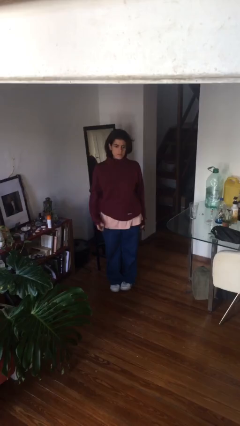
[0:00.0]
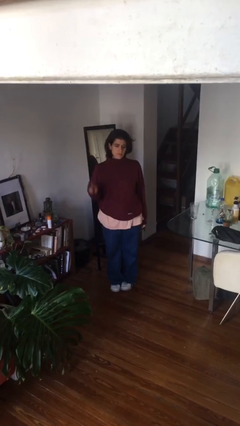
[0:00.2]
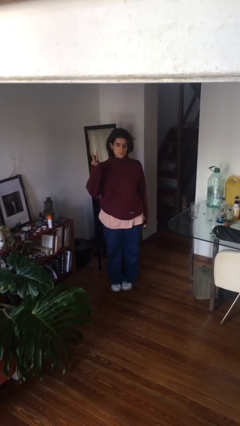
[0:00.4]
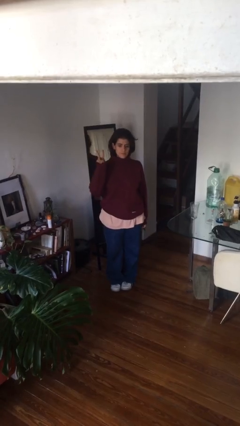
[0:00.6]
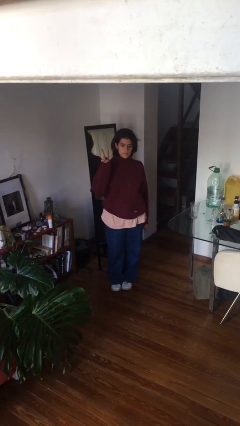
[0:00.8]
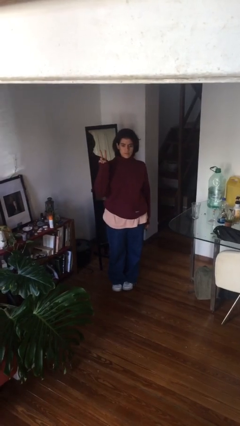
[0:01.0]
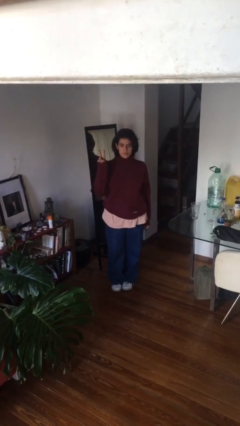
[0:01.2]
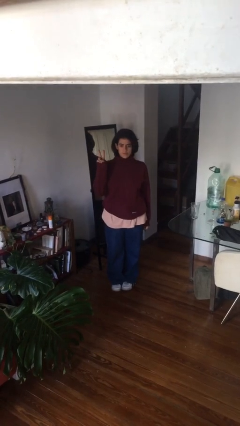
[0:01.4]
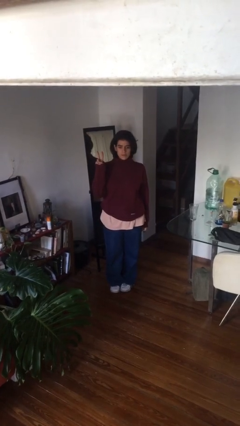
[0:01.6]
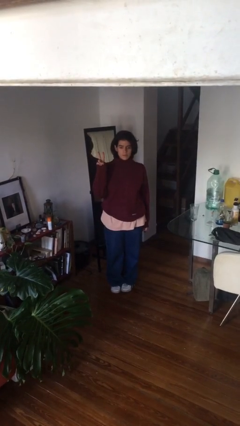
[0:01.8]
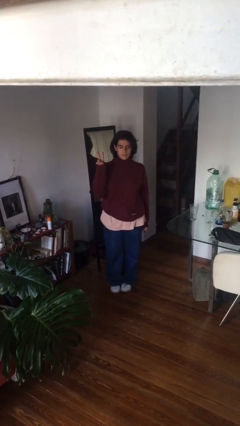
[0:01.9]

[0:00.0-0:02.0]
person gestures peace

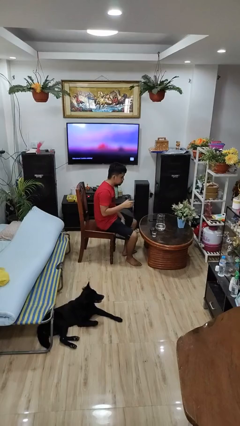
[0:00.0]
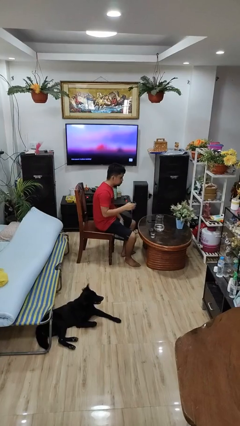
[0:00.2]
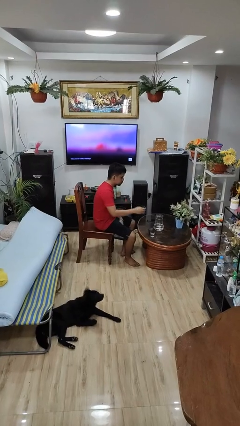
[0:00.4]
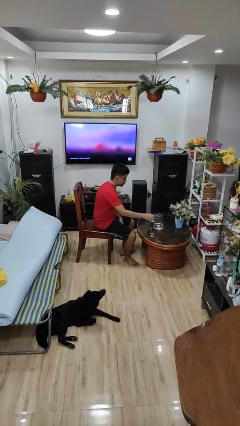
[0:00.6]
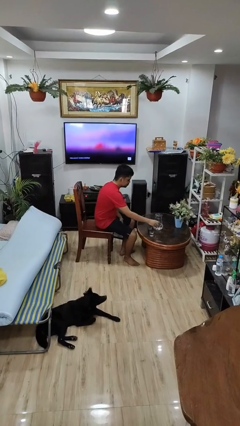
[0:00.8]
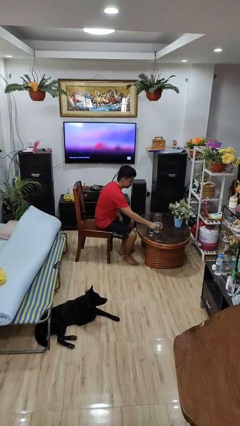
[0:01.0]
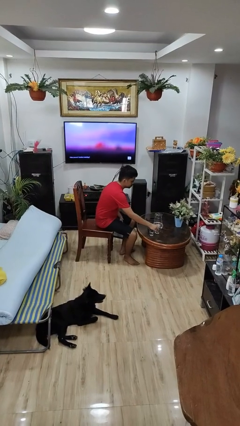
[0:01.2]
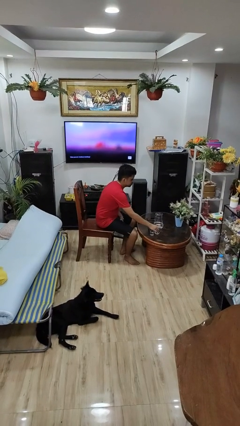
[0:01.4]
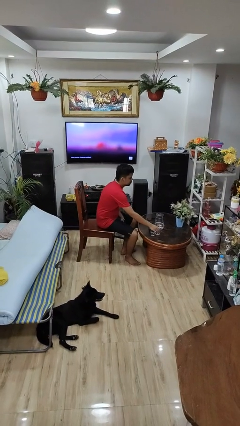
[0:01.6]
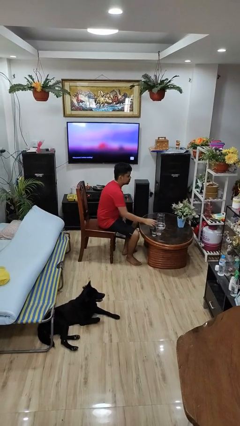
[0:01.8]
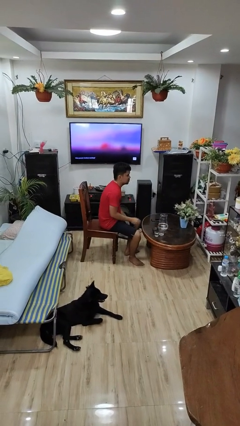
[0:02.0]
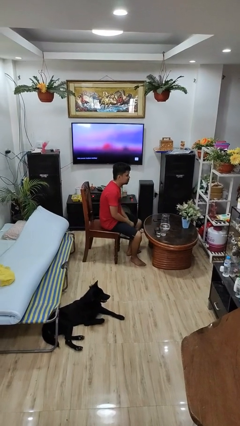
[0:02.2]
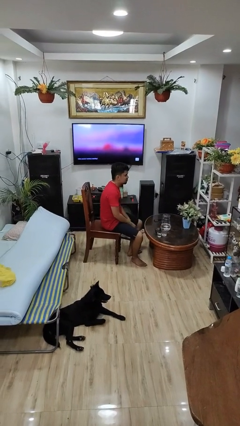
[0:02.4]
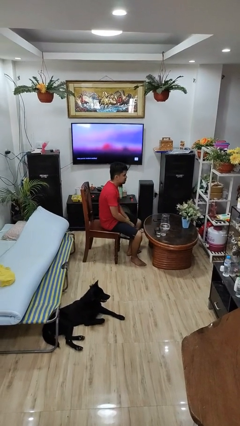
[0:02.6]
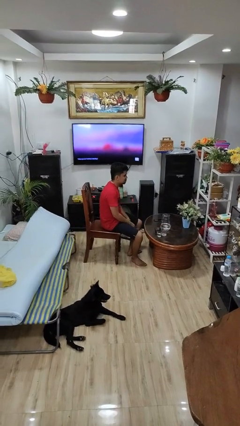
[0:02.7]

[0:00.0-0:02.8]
person puts down object on table

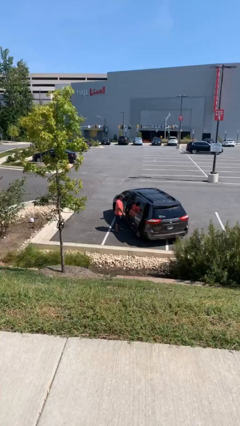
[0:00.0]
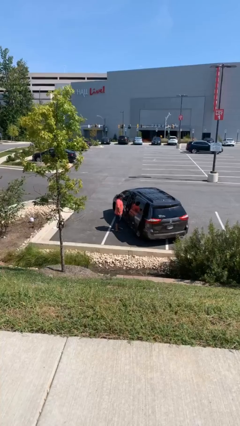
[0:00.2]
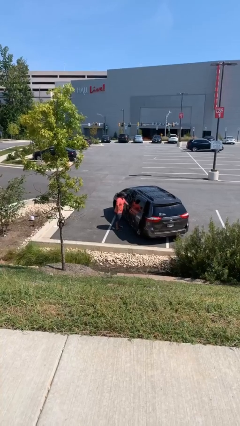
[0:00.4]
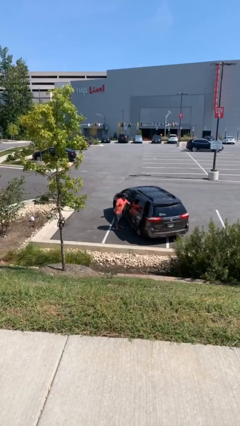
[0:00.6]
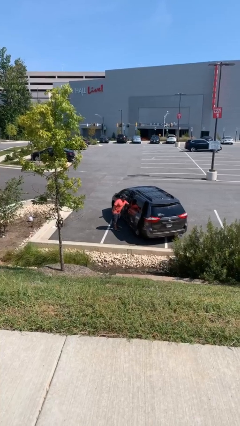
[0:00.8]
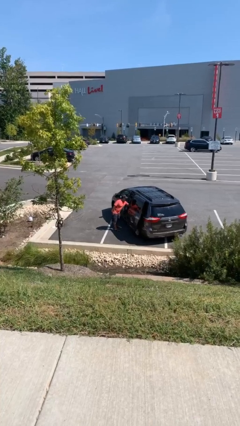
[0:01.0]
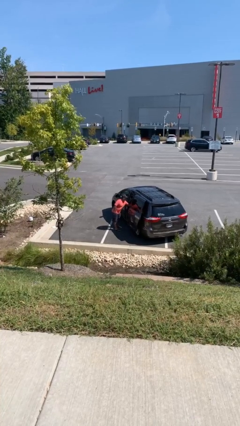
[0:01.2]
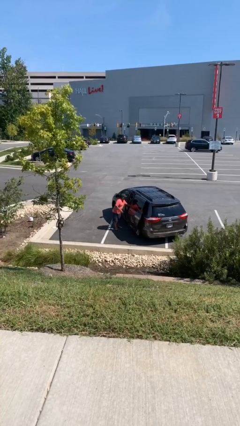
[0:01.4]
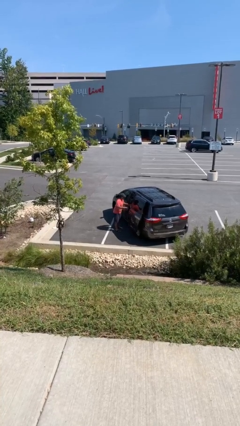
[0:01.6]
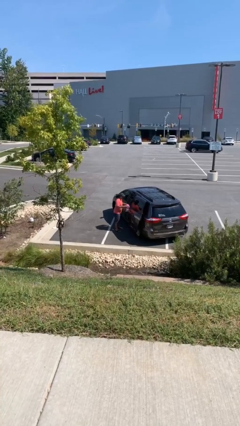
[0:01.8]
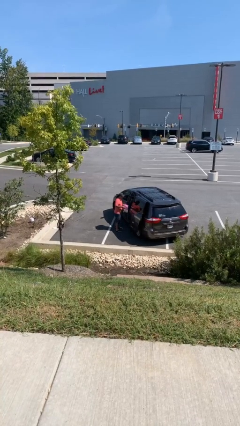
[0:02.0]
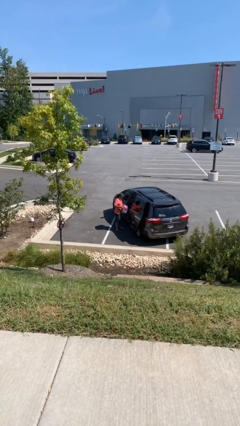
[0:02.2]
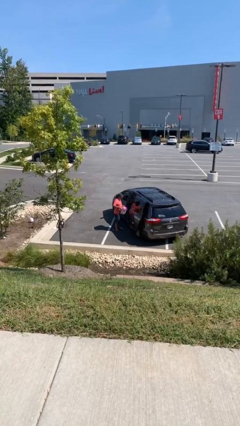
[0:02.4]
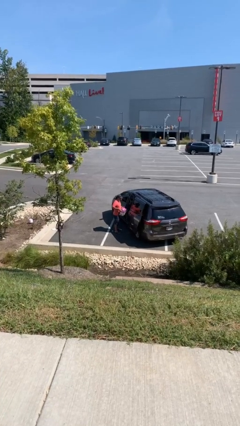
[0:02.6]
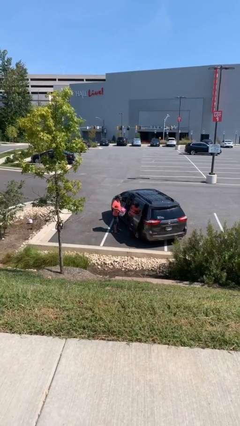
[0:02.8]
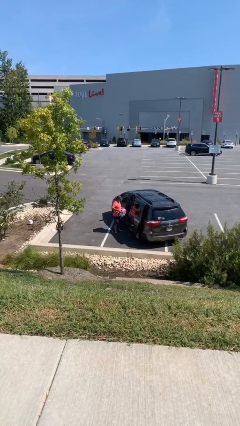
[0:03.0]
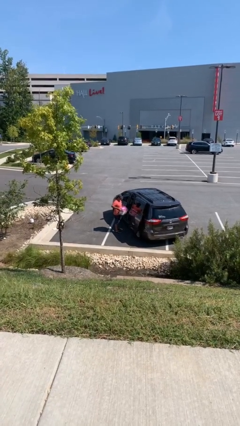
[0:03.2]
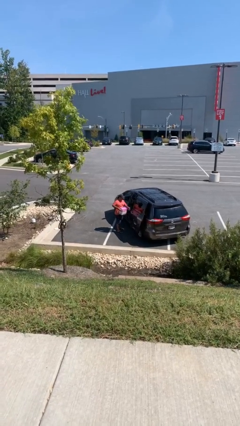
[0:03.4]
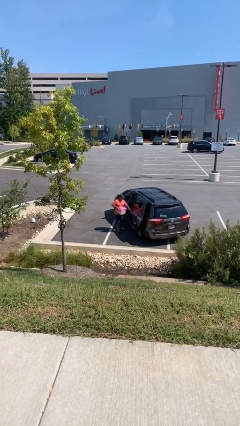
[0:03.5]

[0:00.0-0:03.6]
person unloads car

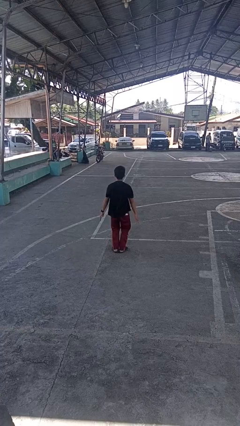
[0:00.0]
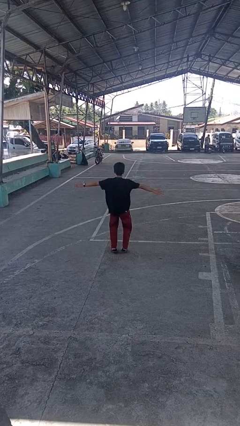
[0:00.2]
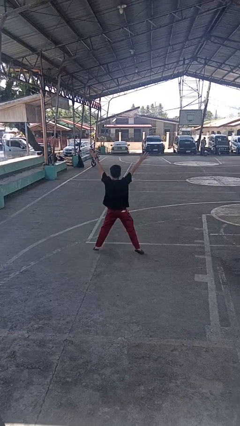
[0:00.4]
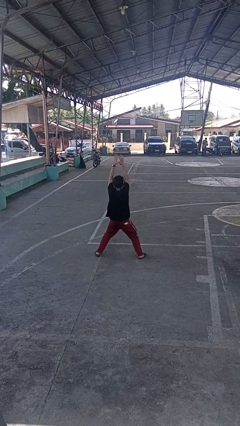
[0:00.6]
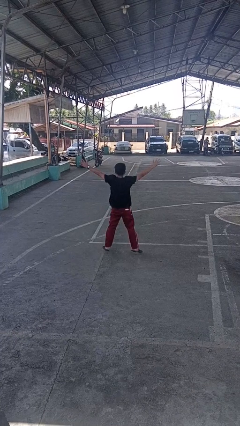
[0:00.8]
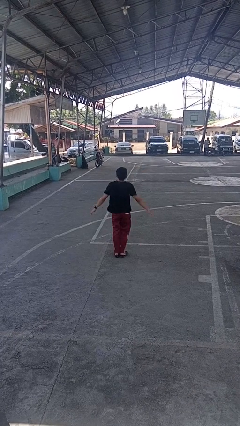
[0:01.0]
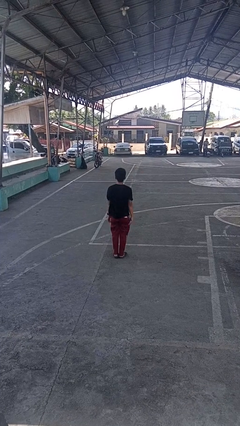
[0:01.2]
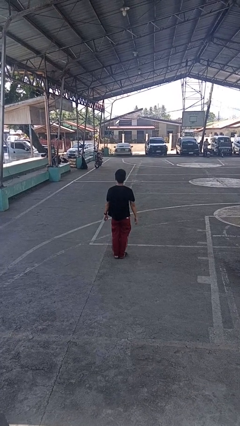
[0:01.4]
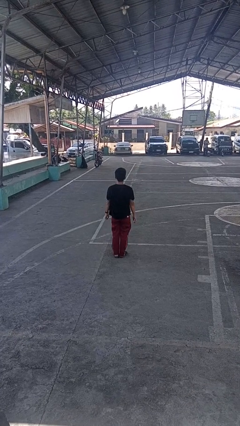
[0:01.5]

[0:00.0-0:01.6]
person exercises with jumping jacks

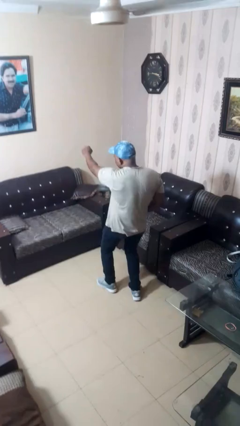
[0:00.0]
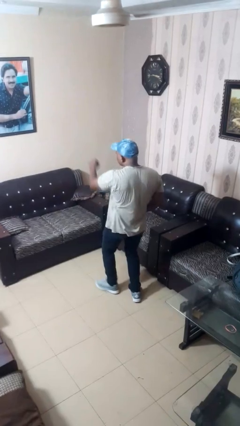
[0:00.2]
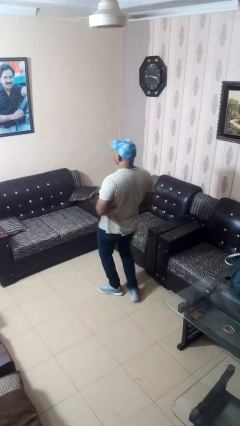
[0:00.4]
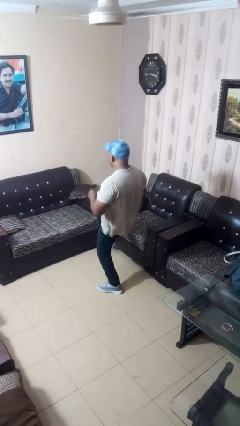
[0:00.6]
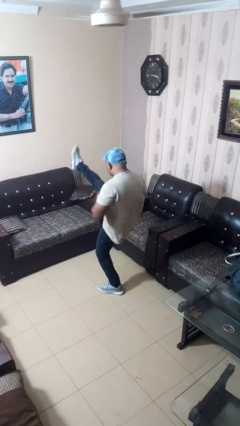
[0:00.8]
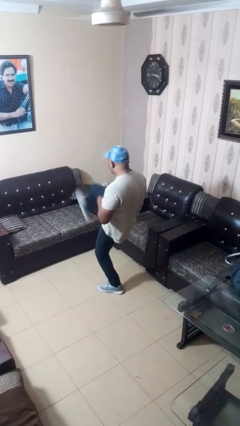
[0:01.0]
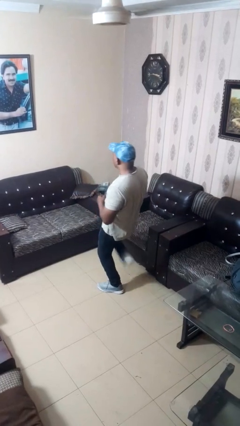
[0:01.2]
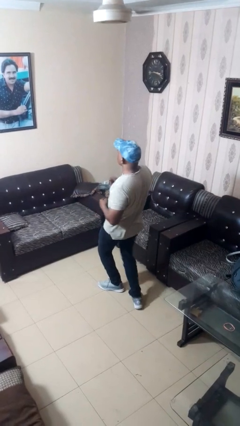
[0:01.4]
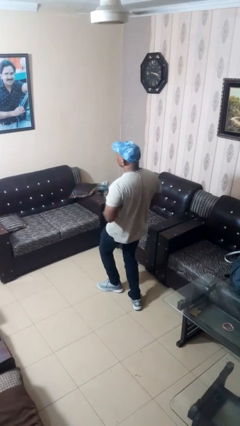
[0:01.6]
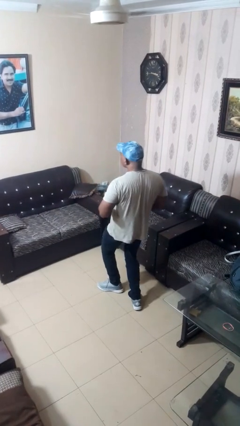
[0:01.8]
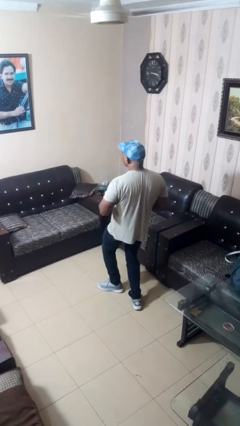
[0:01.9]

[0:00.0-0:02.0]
person karate kicks

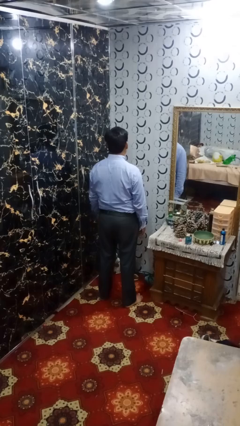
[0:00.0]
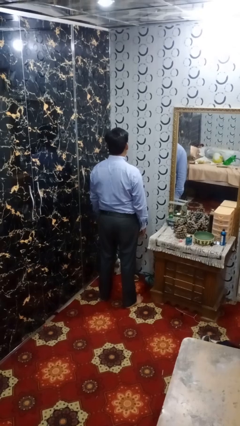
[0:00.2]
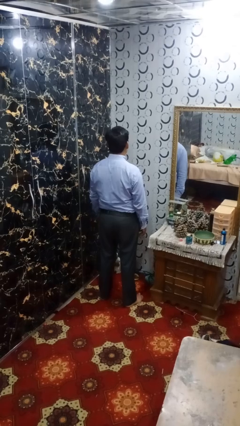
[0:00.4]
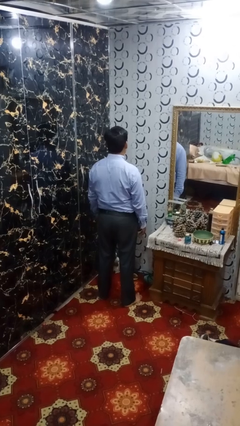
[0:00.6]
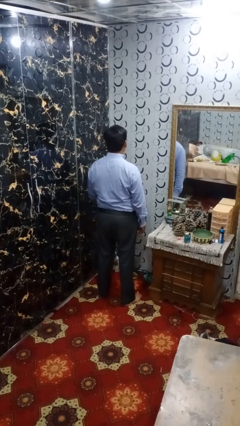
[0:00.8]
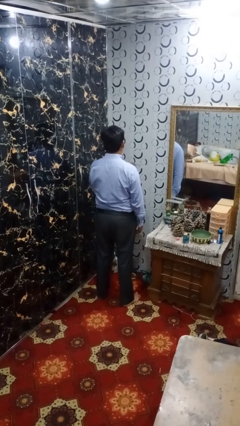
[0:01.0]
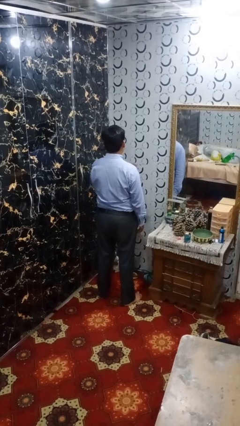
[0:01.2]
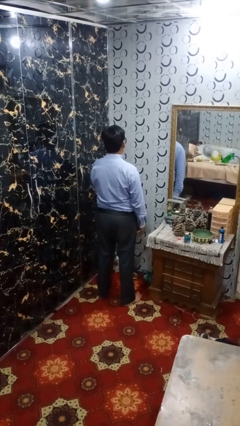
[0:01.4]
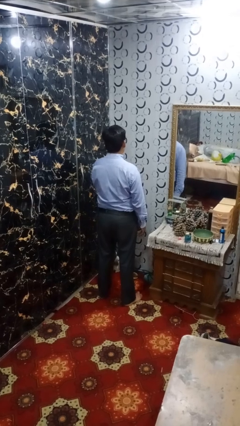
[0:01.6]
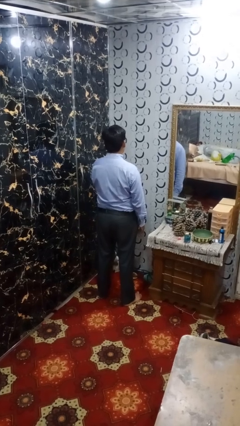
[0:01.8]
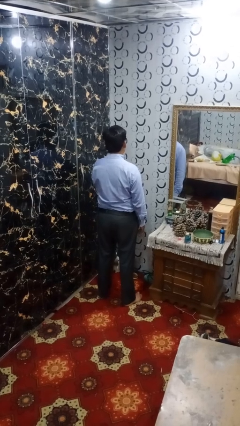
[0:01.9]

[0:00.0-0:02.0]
person drums on chest

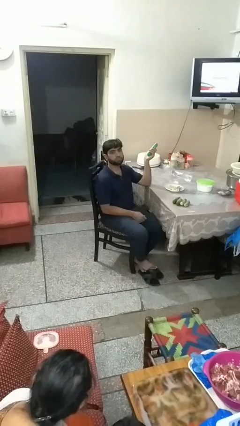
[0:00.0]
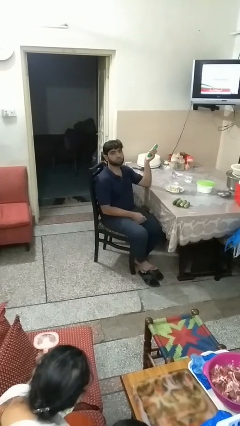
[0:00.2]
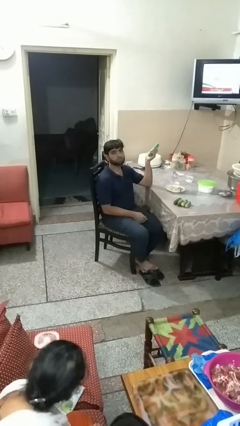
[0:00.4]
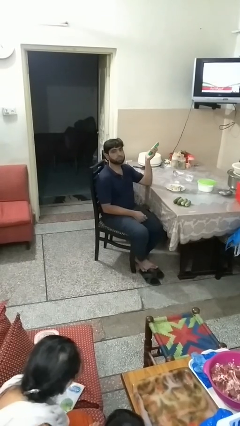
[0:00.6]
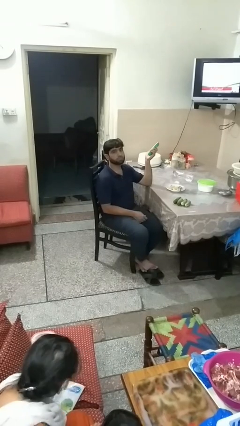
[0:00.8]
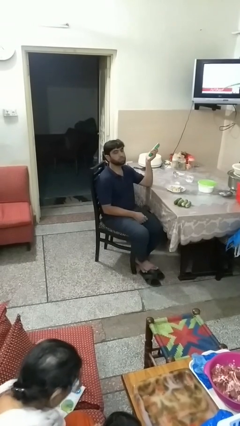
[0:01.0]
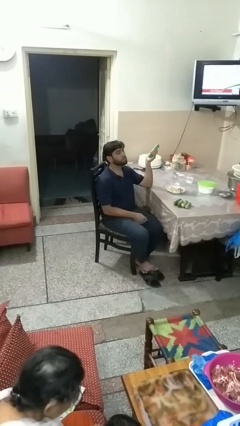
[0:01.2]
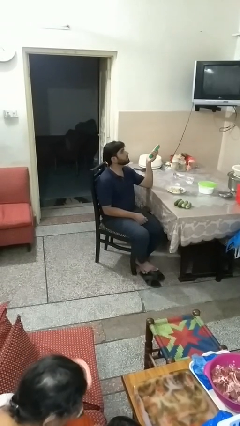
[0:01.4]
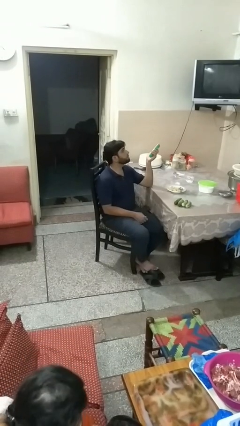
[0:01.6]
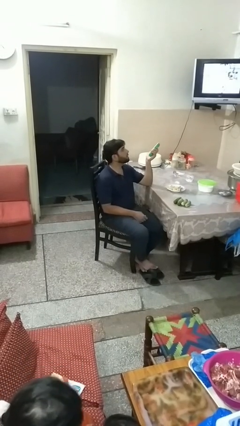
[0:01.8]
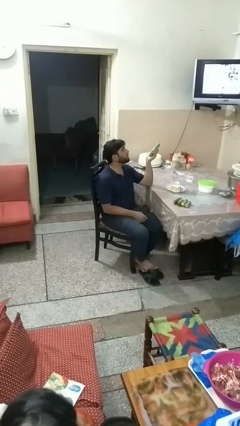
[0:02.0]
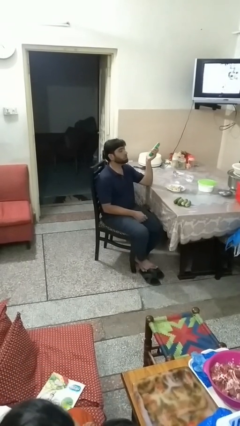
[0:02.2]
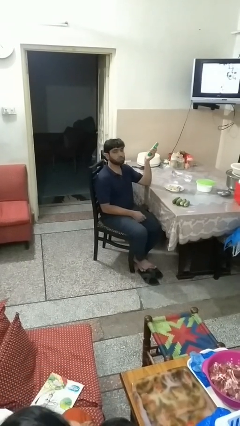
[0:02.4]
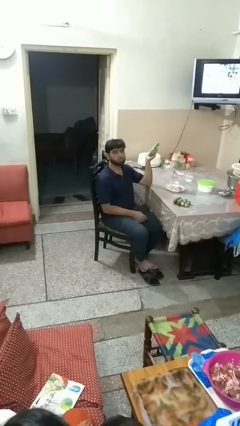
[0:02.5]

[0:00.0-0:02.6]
person uses television remote

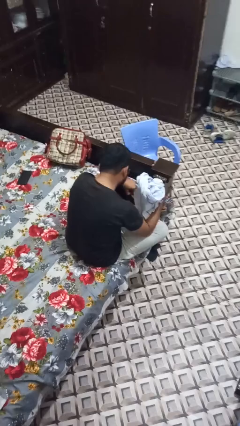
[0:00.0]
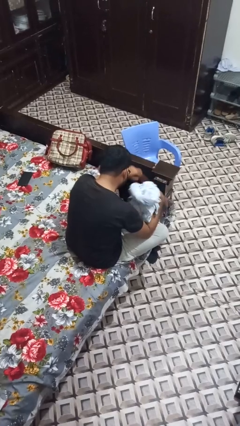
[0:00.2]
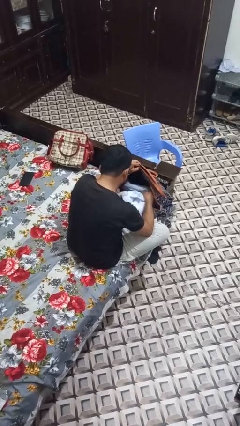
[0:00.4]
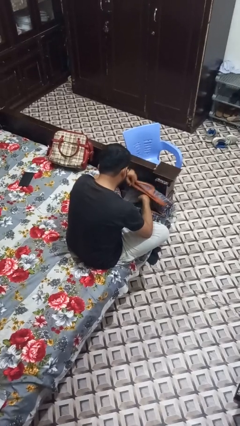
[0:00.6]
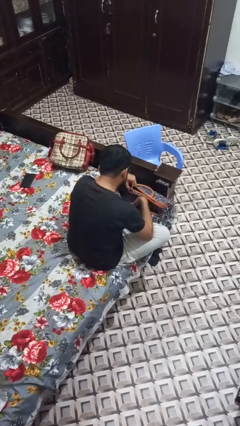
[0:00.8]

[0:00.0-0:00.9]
person puts object into backpack
